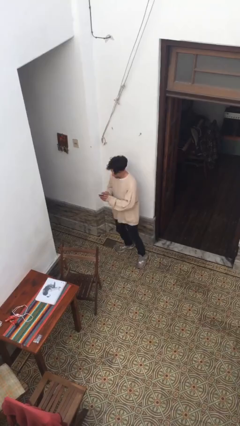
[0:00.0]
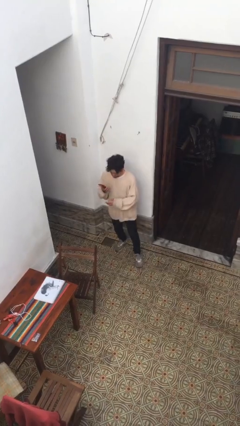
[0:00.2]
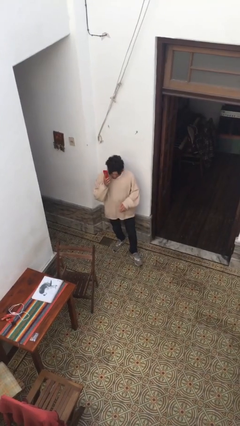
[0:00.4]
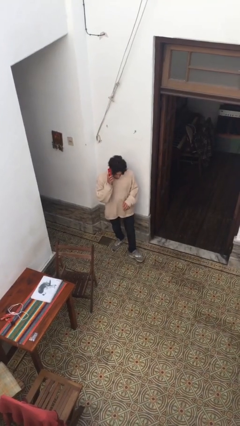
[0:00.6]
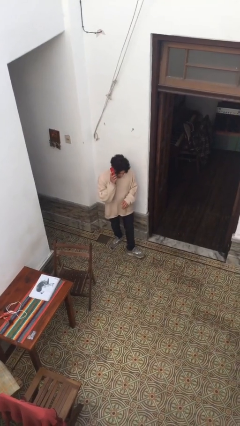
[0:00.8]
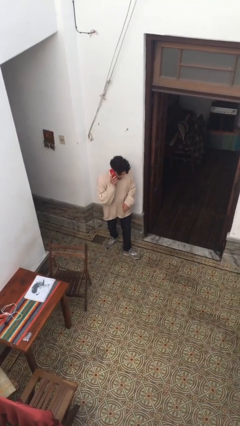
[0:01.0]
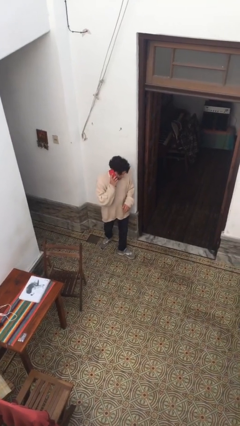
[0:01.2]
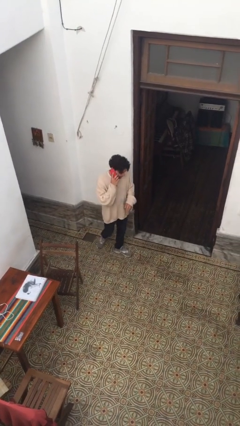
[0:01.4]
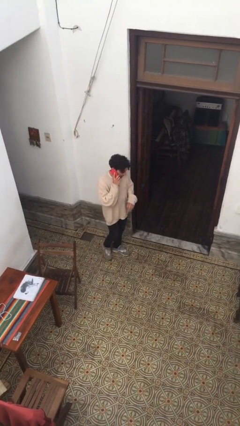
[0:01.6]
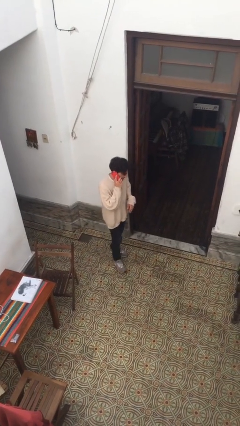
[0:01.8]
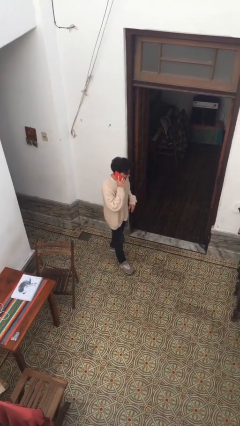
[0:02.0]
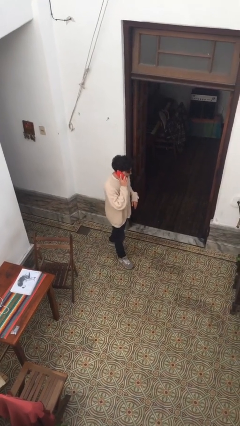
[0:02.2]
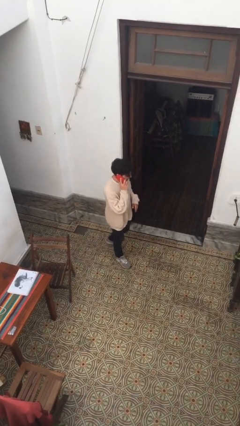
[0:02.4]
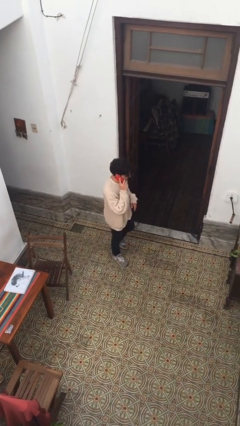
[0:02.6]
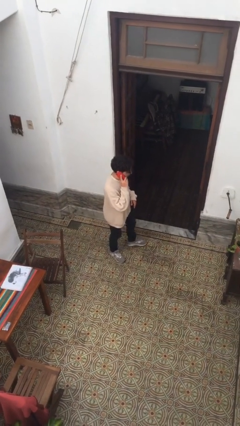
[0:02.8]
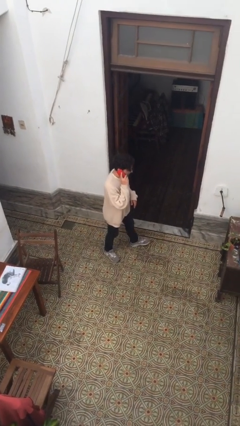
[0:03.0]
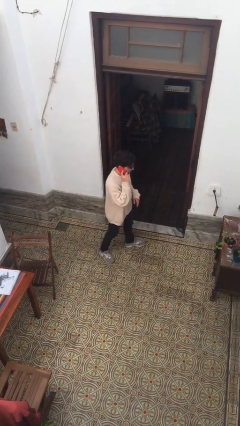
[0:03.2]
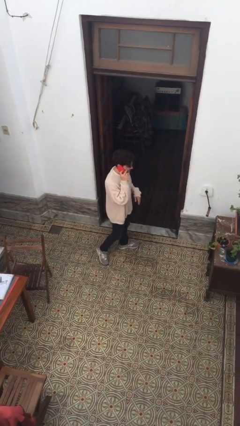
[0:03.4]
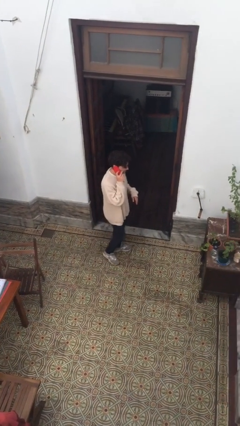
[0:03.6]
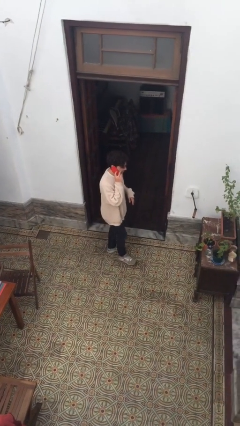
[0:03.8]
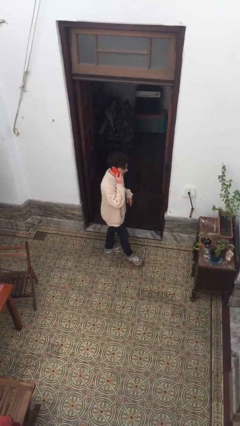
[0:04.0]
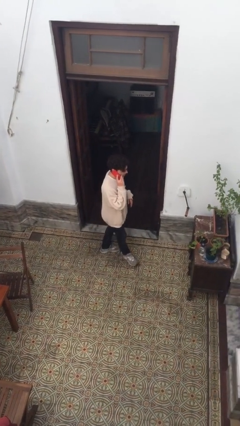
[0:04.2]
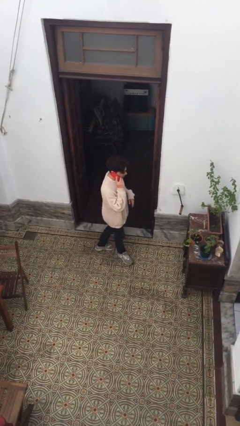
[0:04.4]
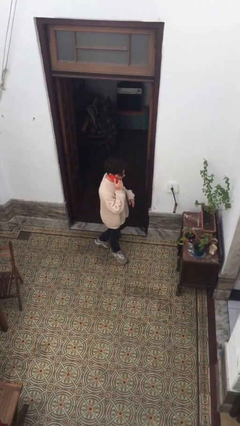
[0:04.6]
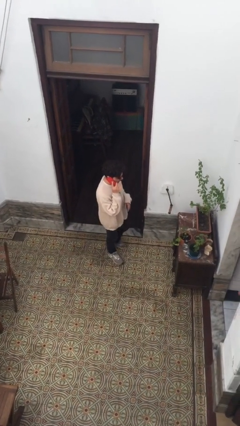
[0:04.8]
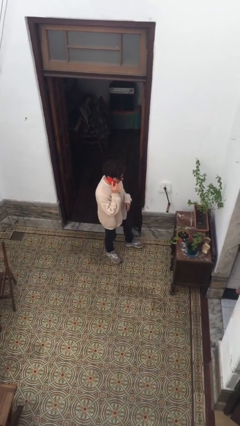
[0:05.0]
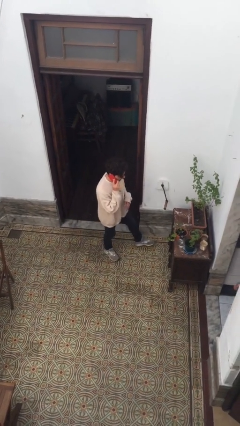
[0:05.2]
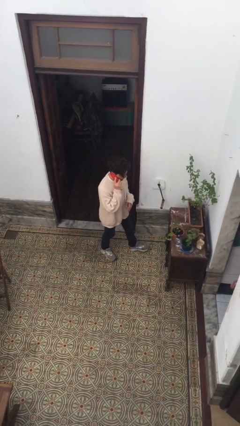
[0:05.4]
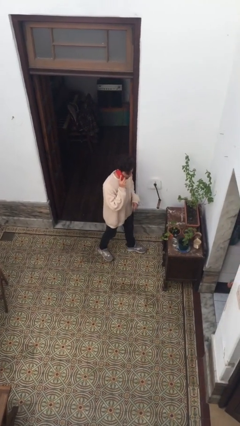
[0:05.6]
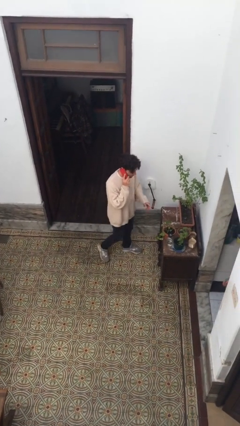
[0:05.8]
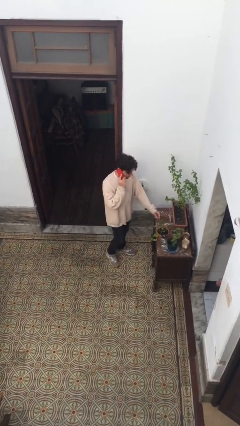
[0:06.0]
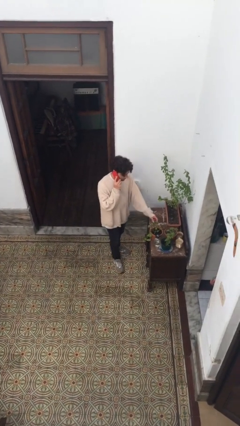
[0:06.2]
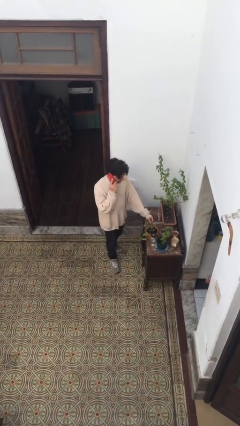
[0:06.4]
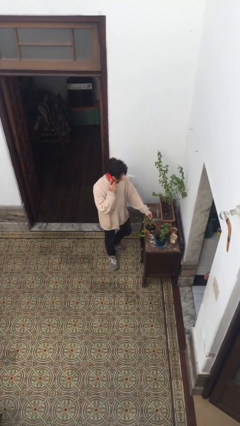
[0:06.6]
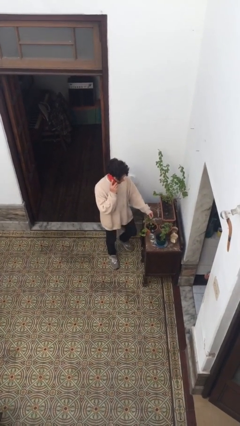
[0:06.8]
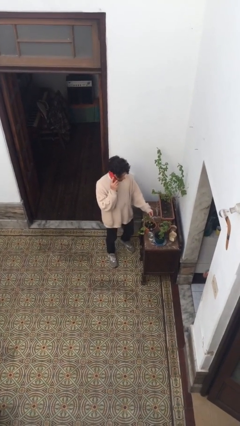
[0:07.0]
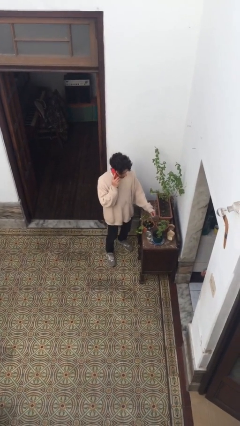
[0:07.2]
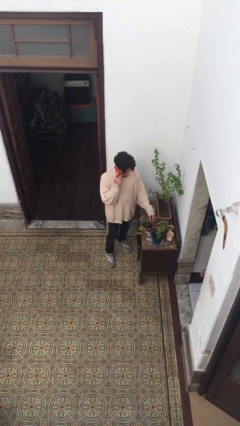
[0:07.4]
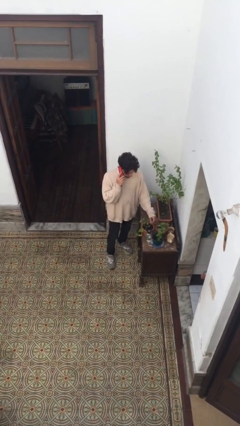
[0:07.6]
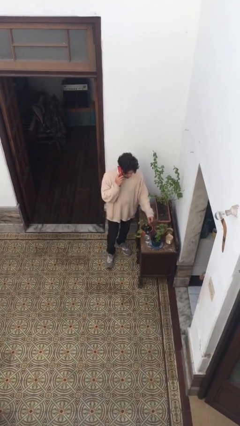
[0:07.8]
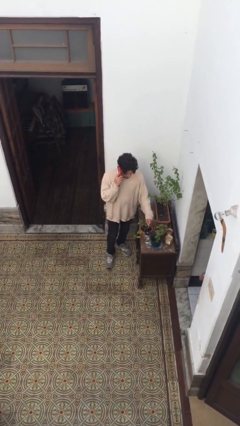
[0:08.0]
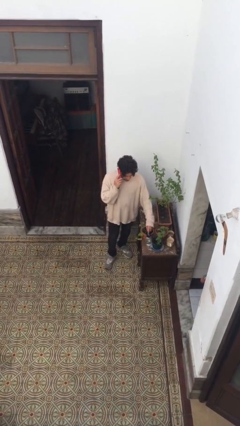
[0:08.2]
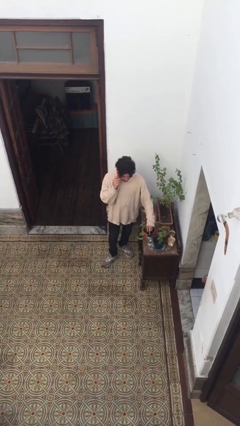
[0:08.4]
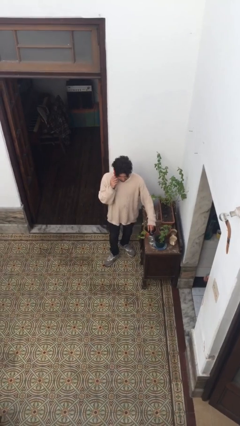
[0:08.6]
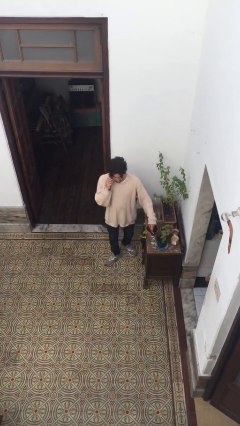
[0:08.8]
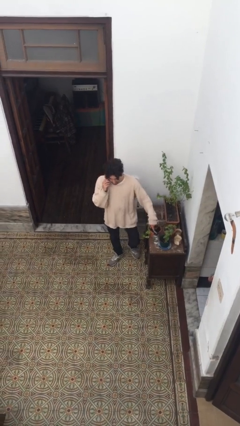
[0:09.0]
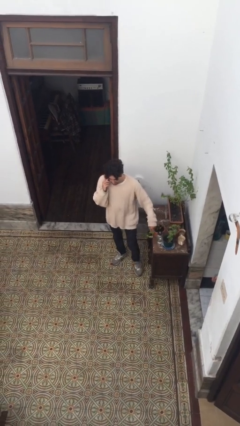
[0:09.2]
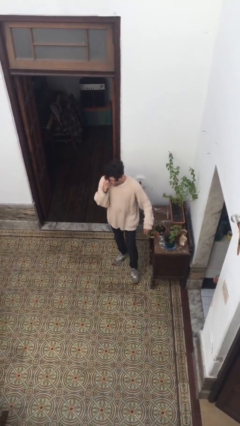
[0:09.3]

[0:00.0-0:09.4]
person talks on phone

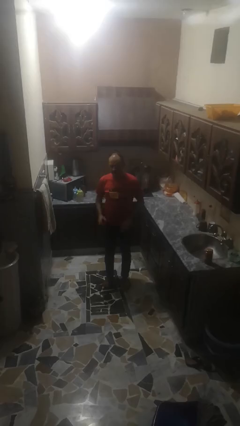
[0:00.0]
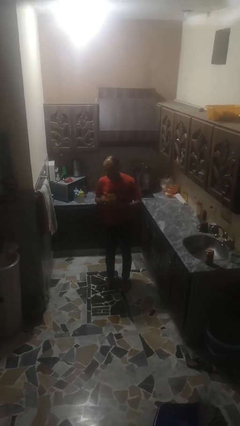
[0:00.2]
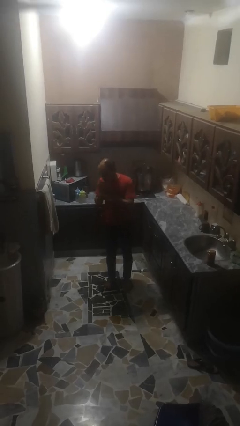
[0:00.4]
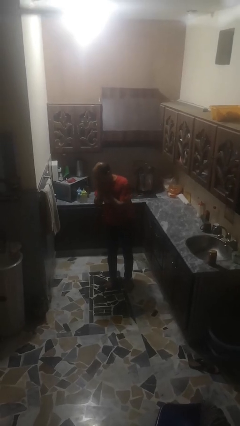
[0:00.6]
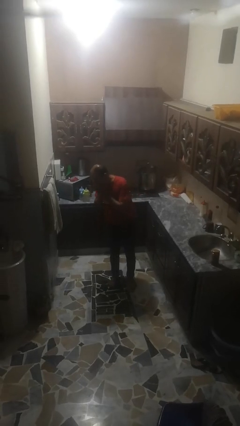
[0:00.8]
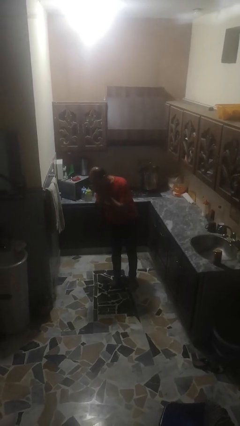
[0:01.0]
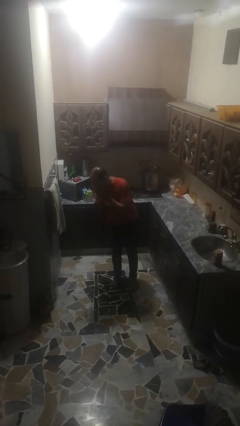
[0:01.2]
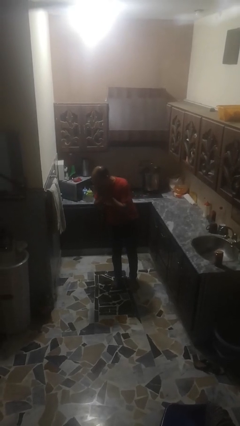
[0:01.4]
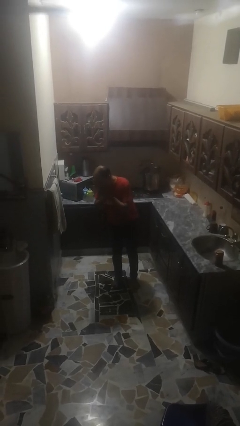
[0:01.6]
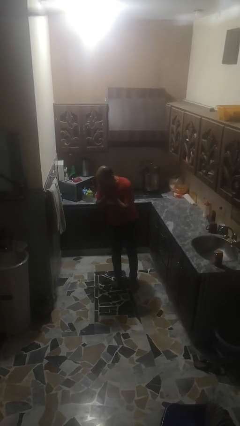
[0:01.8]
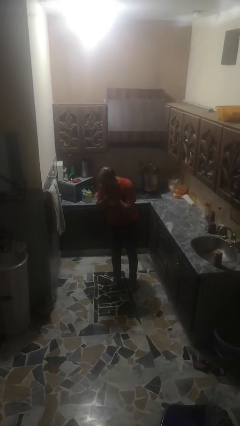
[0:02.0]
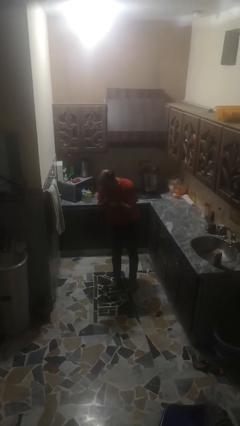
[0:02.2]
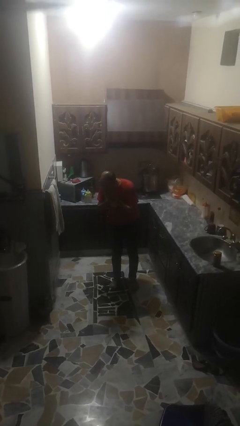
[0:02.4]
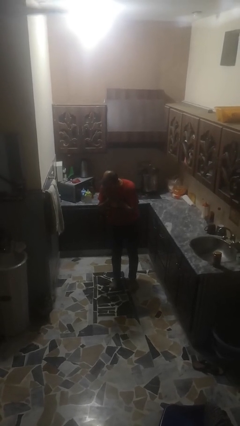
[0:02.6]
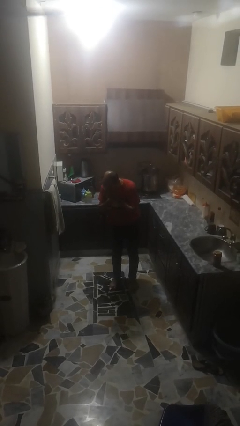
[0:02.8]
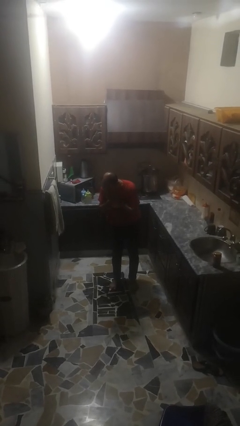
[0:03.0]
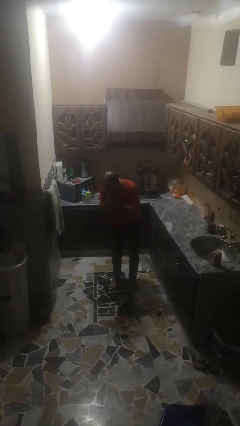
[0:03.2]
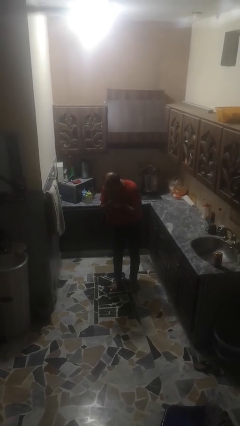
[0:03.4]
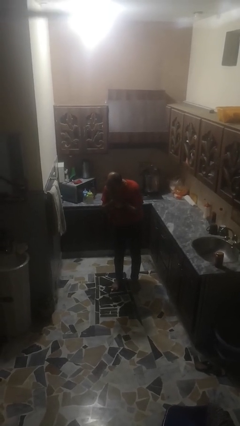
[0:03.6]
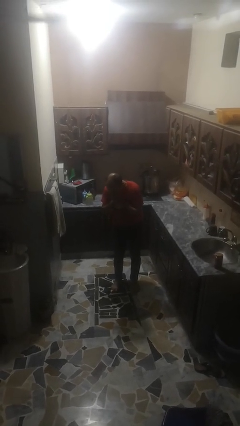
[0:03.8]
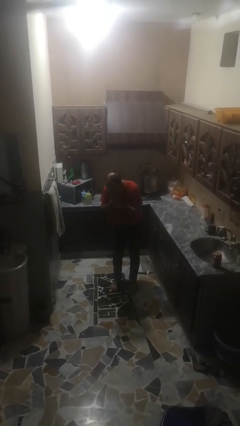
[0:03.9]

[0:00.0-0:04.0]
person sneezes into hand

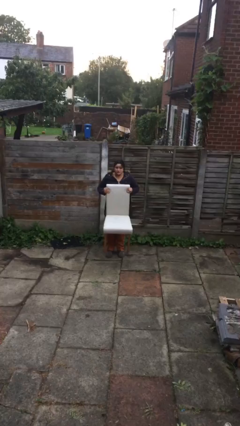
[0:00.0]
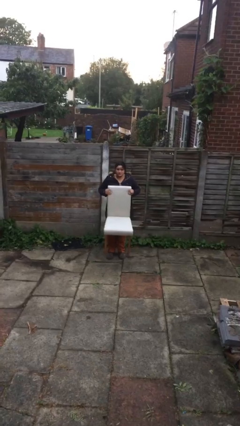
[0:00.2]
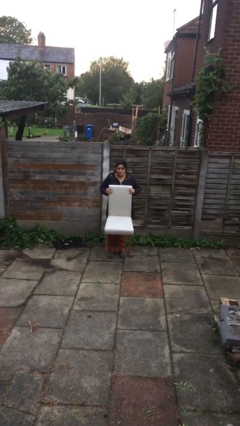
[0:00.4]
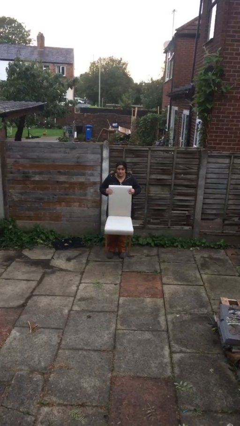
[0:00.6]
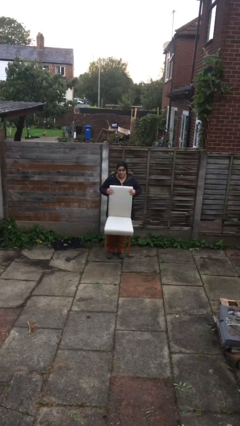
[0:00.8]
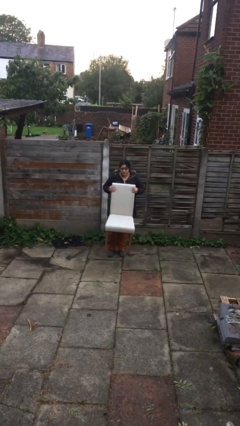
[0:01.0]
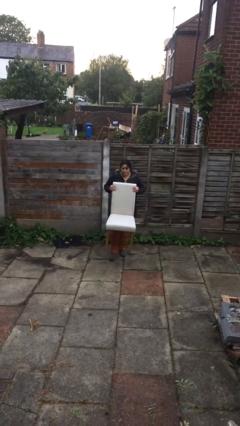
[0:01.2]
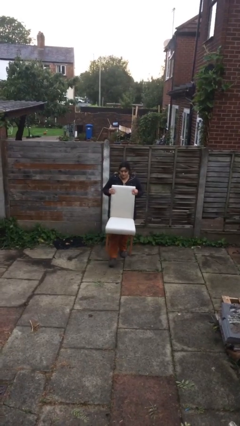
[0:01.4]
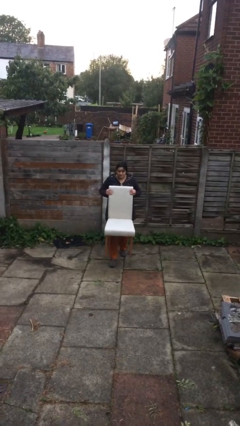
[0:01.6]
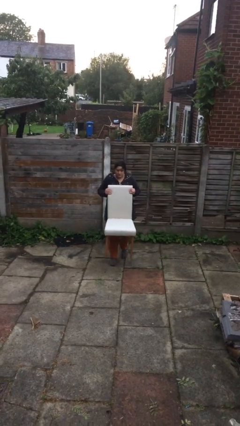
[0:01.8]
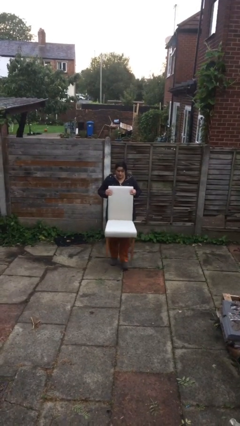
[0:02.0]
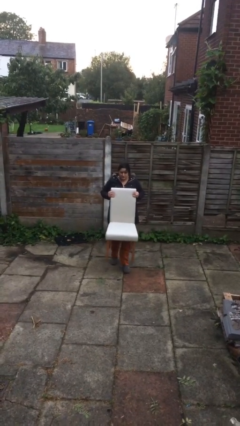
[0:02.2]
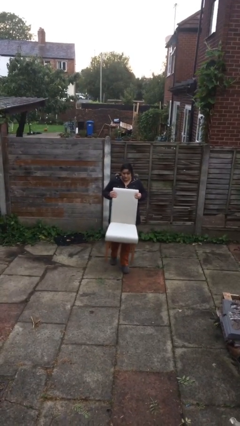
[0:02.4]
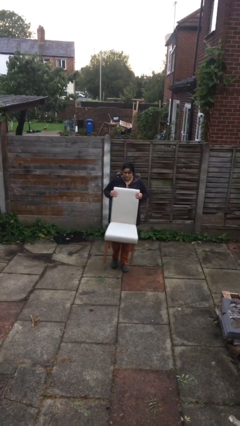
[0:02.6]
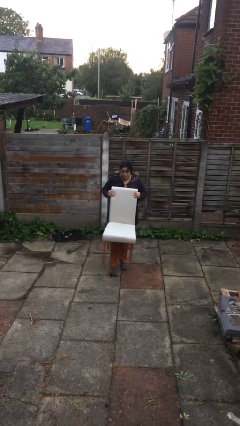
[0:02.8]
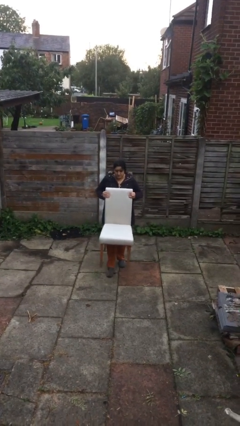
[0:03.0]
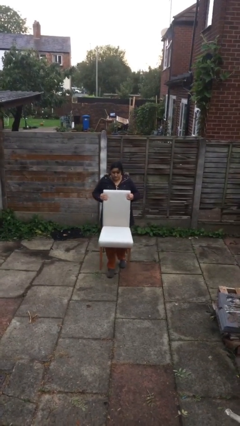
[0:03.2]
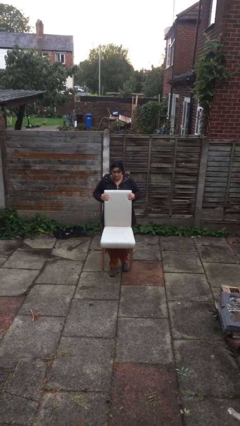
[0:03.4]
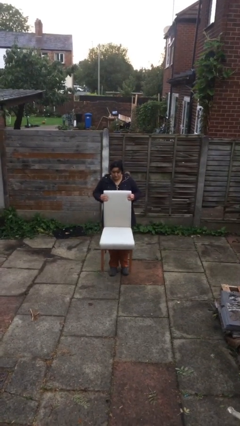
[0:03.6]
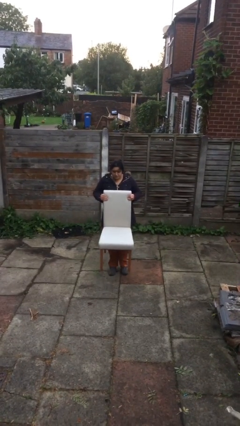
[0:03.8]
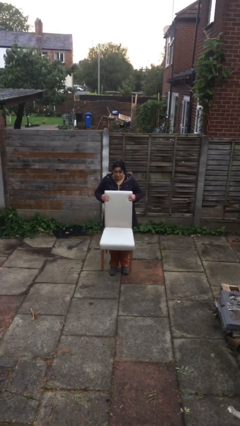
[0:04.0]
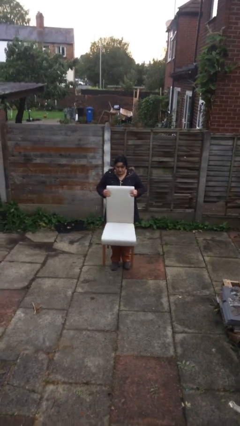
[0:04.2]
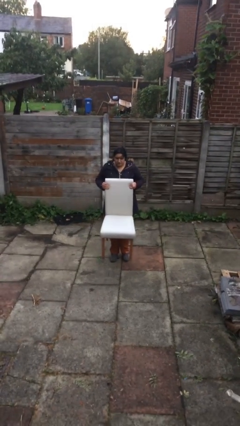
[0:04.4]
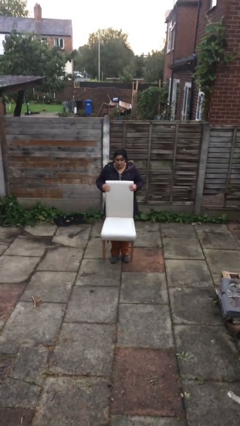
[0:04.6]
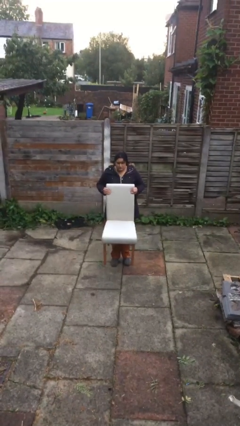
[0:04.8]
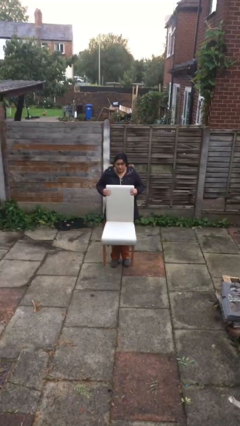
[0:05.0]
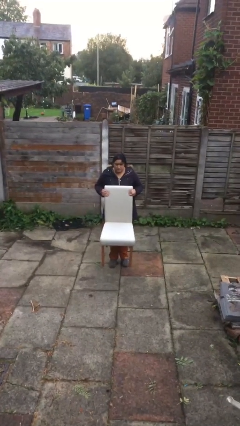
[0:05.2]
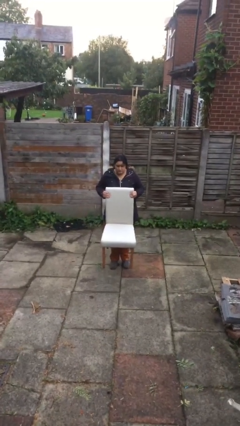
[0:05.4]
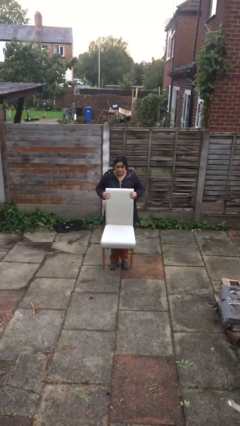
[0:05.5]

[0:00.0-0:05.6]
person carries heavy object
